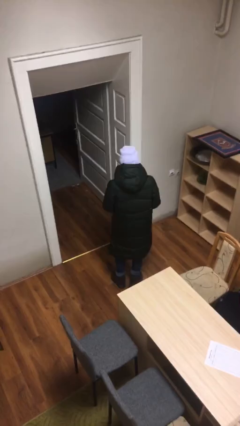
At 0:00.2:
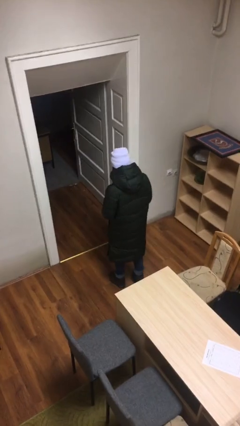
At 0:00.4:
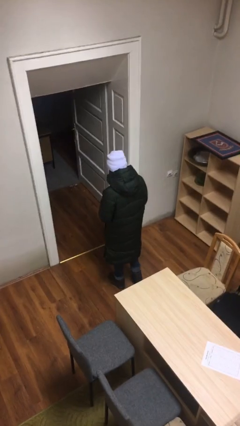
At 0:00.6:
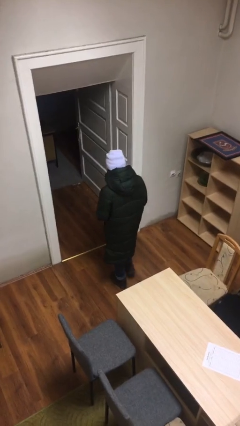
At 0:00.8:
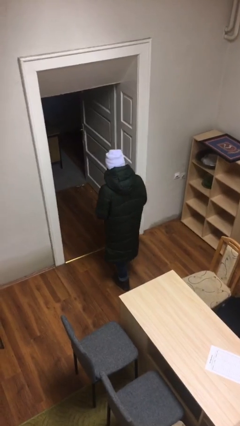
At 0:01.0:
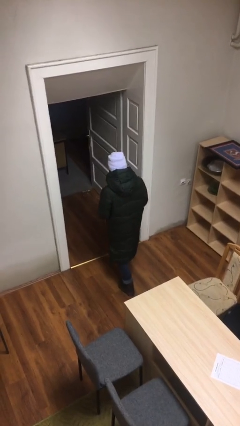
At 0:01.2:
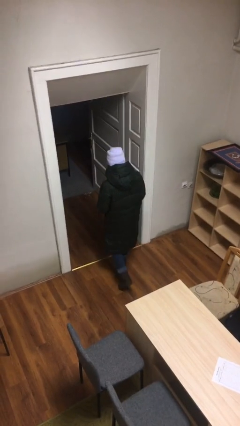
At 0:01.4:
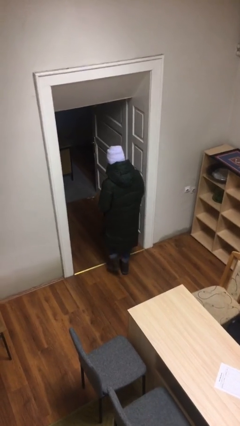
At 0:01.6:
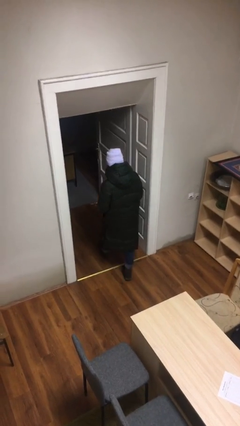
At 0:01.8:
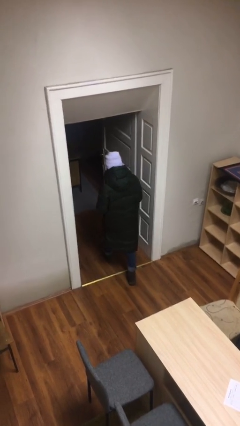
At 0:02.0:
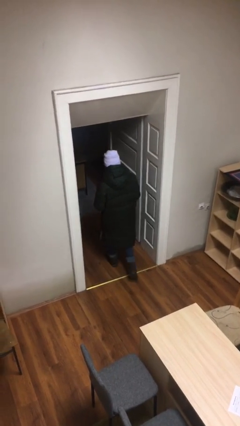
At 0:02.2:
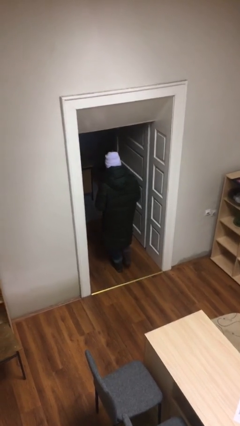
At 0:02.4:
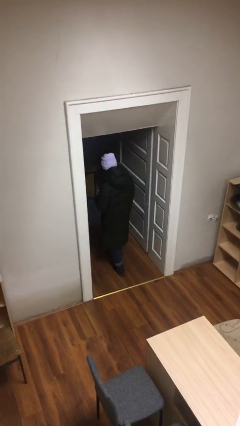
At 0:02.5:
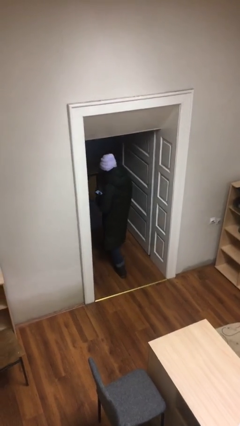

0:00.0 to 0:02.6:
person exits scene through structure

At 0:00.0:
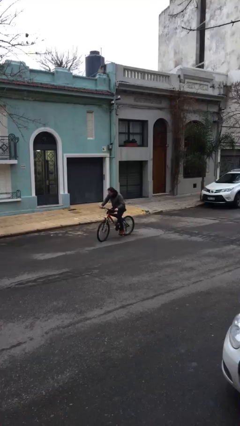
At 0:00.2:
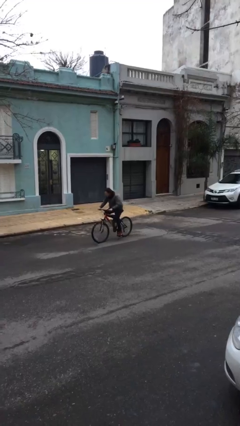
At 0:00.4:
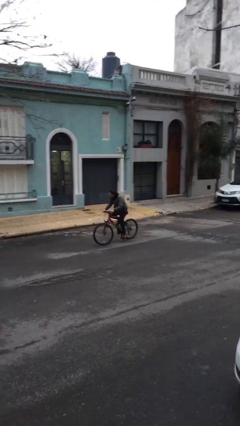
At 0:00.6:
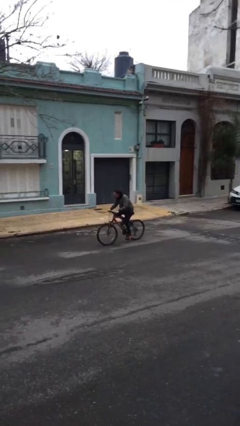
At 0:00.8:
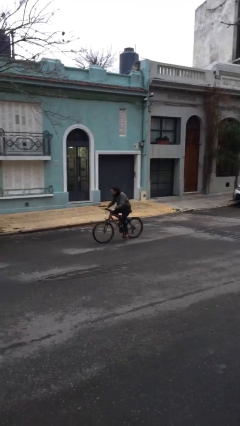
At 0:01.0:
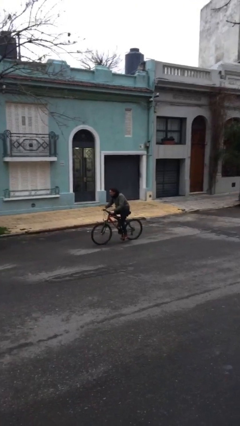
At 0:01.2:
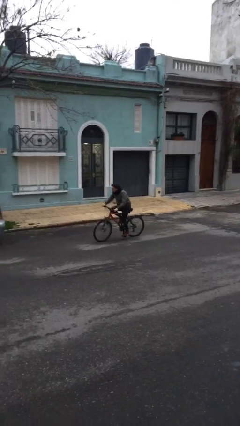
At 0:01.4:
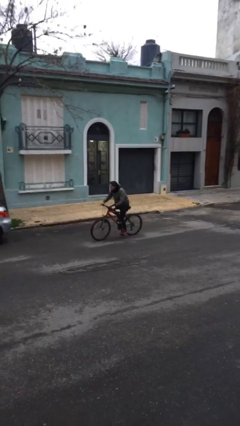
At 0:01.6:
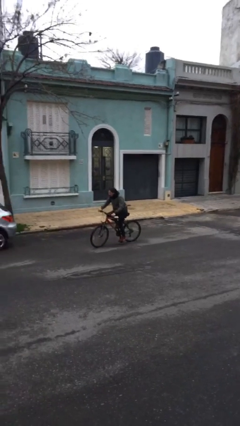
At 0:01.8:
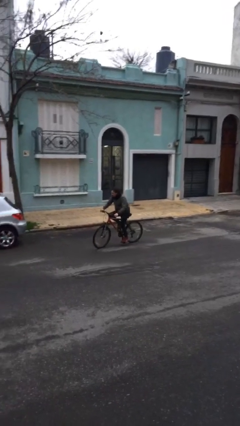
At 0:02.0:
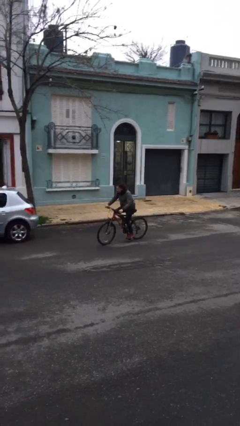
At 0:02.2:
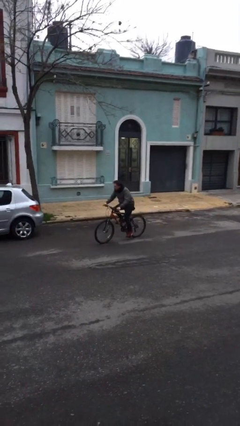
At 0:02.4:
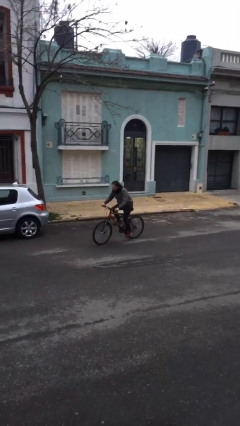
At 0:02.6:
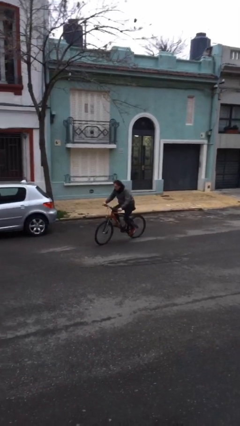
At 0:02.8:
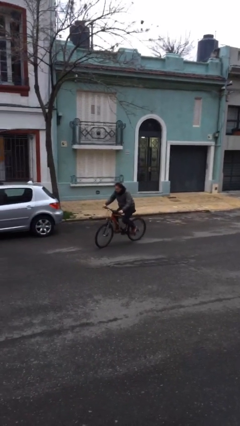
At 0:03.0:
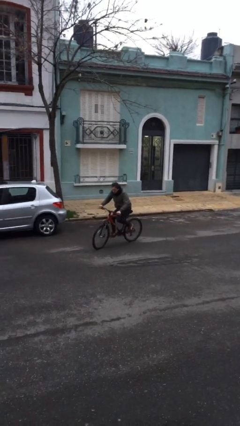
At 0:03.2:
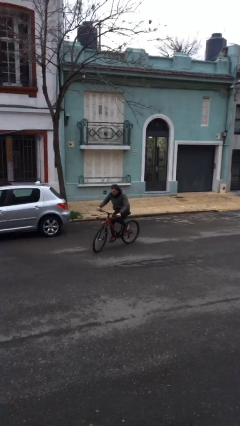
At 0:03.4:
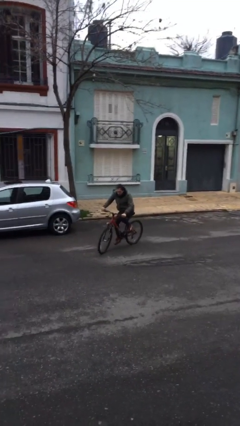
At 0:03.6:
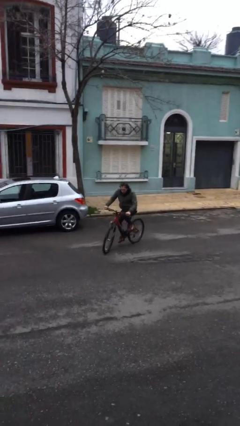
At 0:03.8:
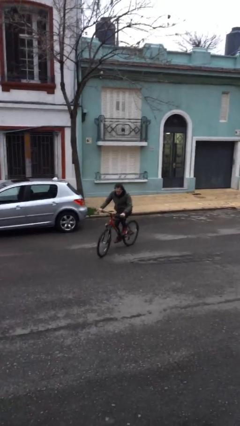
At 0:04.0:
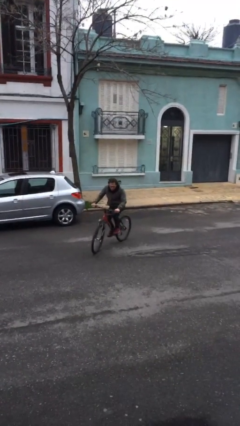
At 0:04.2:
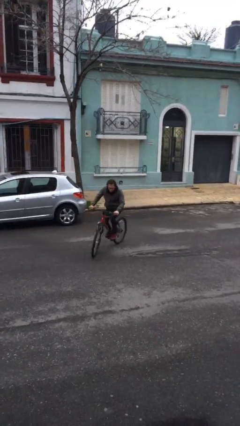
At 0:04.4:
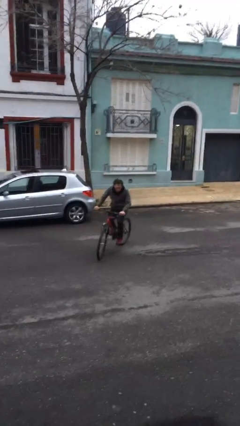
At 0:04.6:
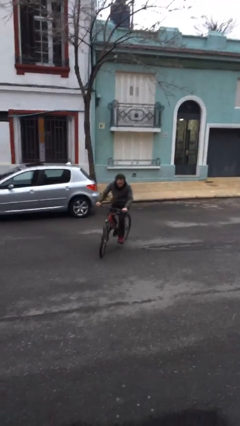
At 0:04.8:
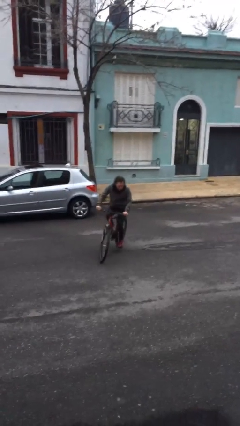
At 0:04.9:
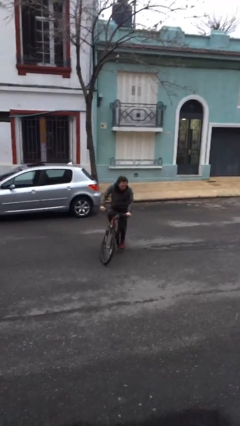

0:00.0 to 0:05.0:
person rides bicycle

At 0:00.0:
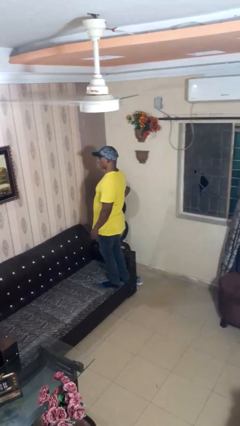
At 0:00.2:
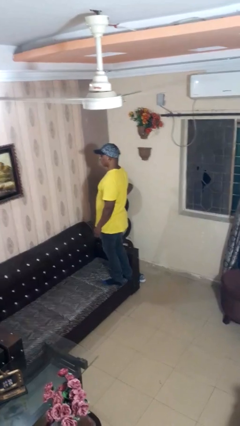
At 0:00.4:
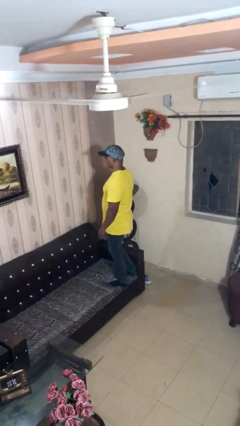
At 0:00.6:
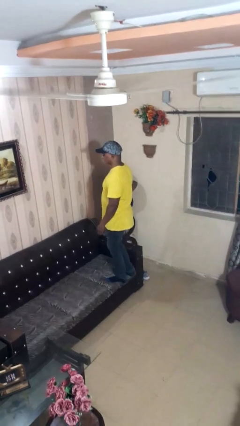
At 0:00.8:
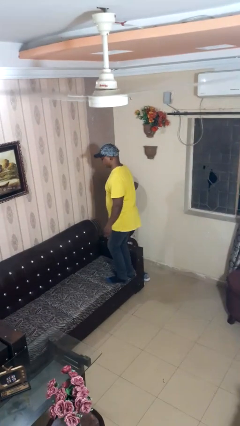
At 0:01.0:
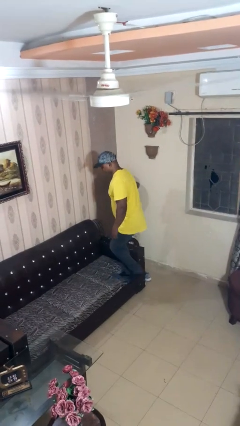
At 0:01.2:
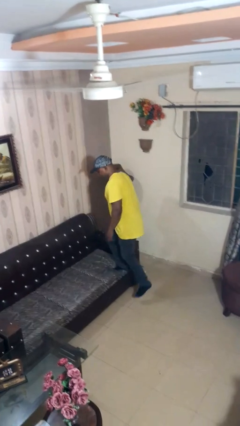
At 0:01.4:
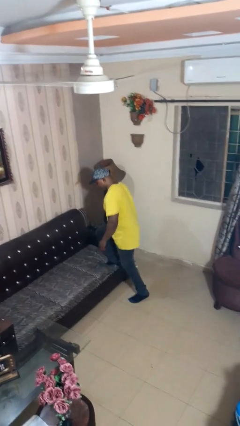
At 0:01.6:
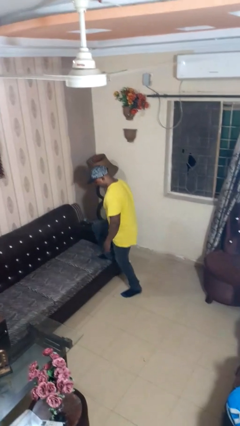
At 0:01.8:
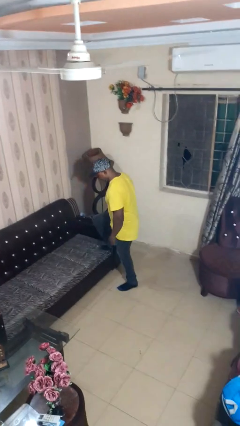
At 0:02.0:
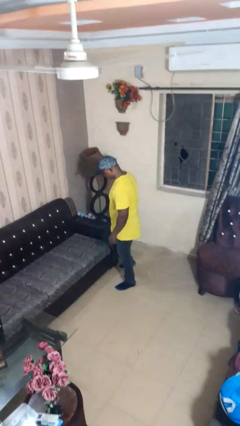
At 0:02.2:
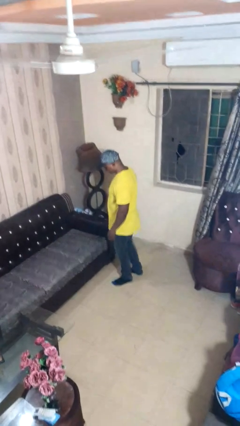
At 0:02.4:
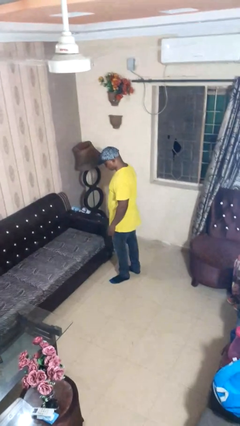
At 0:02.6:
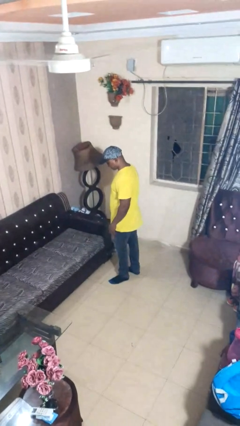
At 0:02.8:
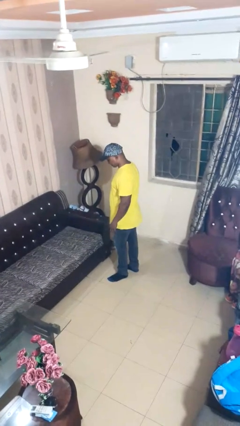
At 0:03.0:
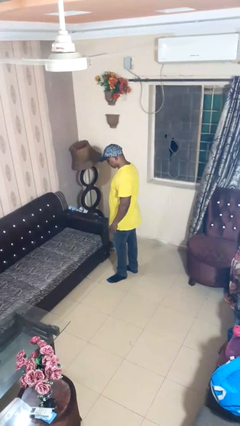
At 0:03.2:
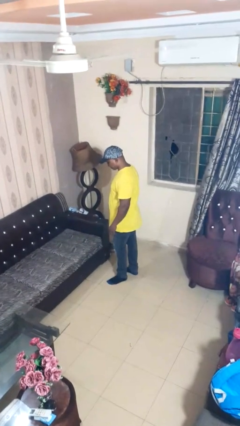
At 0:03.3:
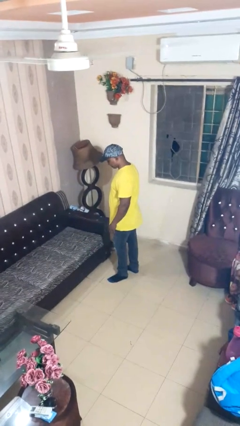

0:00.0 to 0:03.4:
person climbs off couch

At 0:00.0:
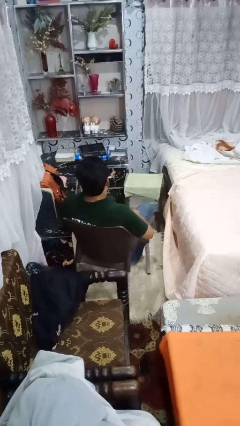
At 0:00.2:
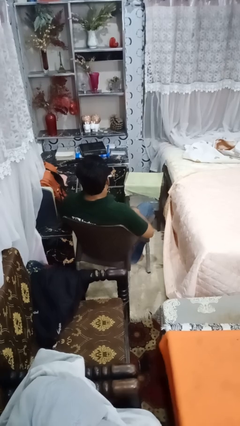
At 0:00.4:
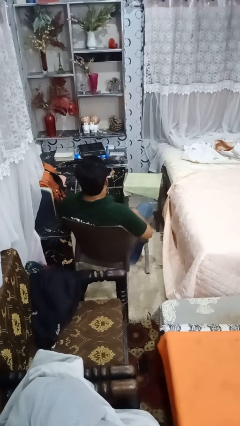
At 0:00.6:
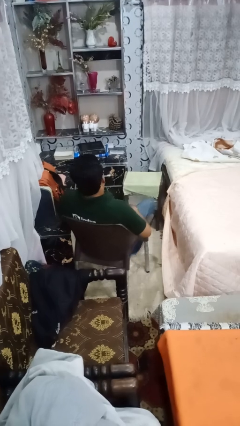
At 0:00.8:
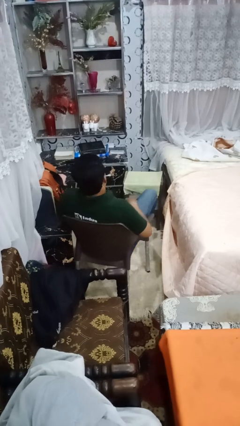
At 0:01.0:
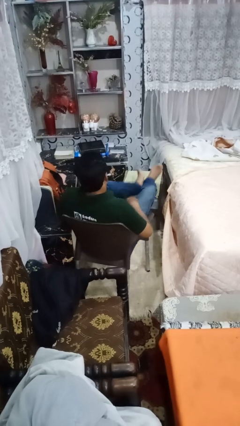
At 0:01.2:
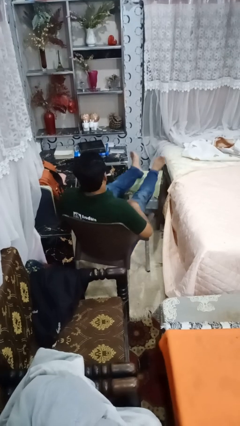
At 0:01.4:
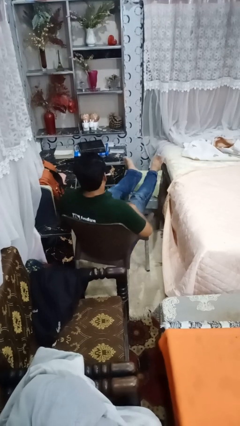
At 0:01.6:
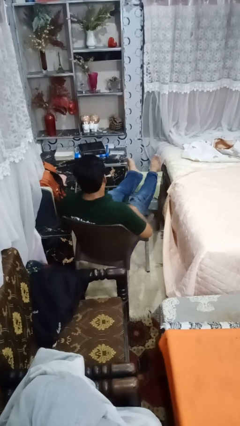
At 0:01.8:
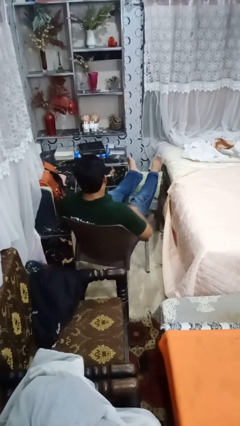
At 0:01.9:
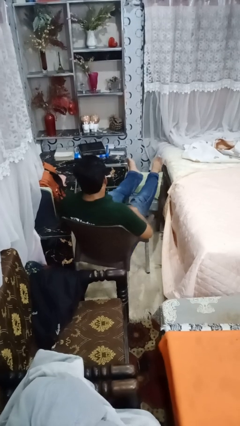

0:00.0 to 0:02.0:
person puts feet up

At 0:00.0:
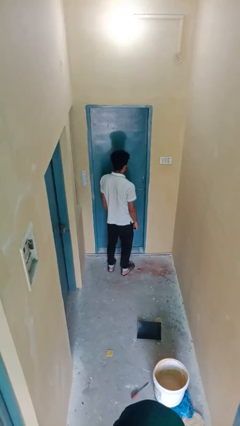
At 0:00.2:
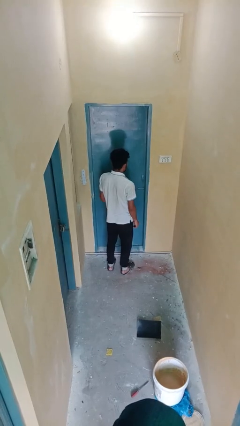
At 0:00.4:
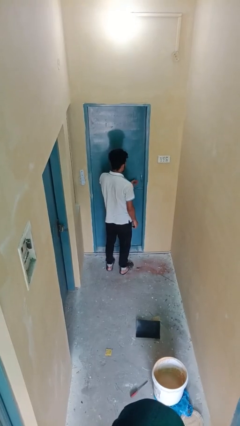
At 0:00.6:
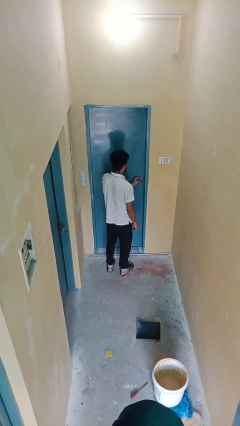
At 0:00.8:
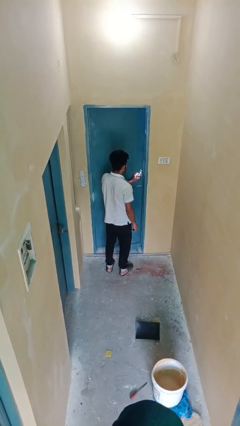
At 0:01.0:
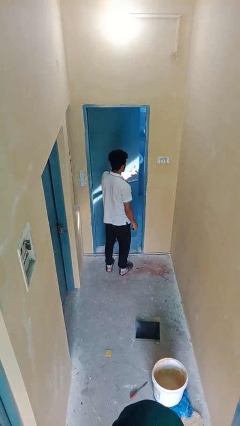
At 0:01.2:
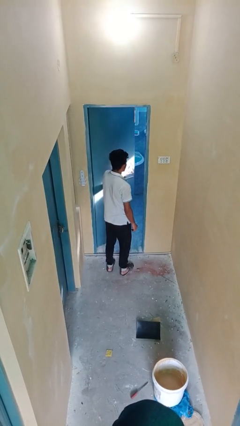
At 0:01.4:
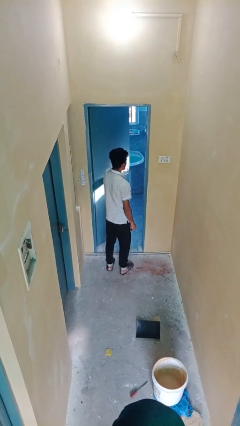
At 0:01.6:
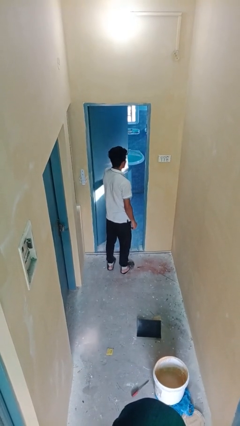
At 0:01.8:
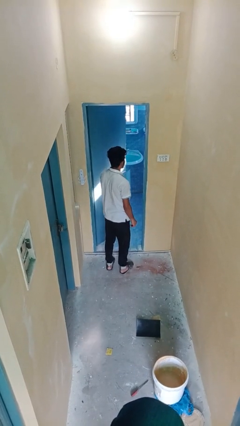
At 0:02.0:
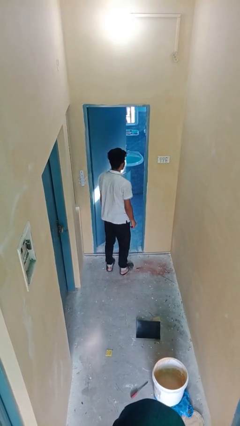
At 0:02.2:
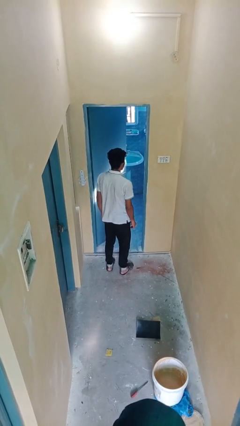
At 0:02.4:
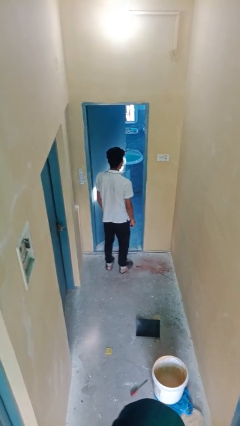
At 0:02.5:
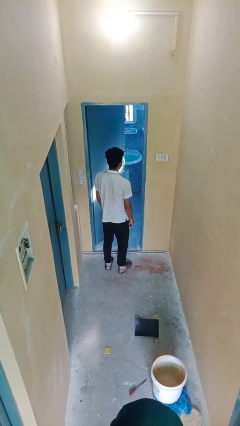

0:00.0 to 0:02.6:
person opens facility door

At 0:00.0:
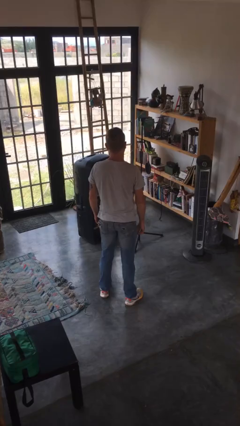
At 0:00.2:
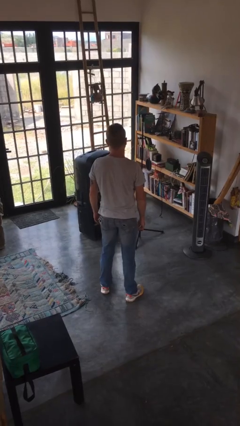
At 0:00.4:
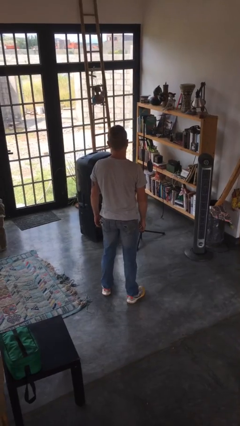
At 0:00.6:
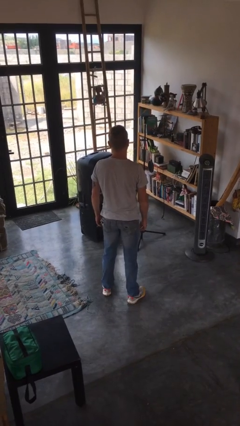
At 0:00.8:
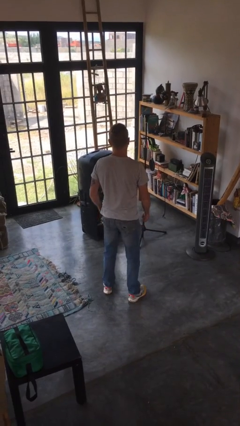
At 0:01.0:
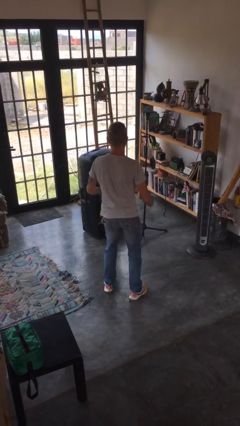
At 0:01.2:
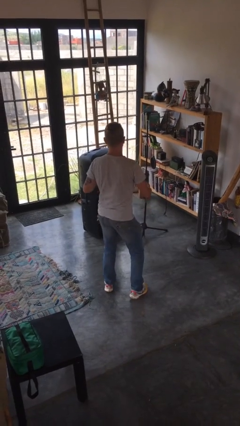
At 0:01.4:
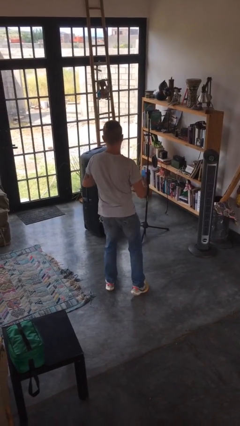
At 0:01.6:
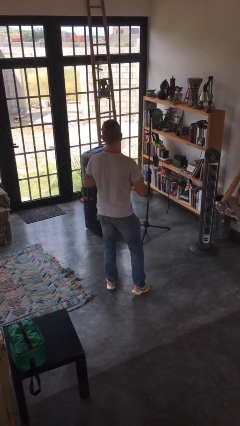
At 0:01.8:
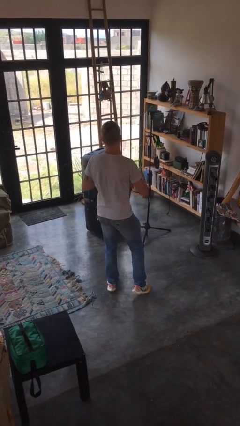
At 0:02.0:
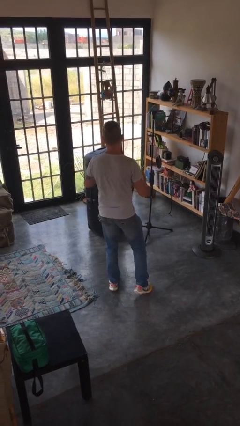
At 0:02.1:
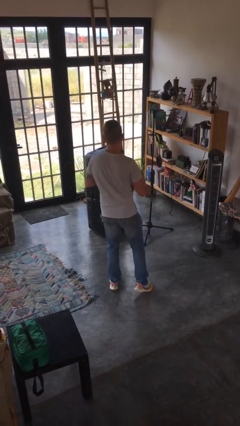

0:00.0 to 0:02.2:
person wiggles hips
